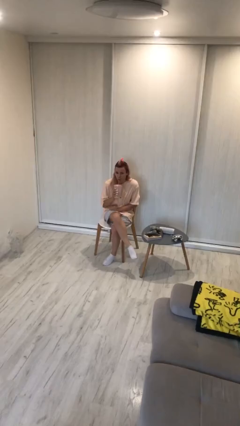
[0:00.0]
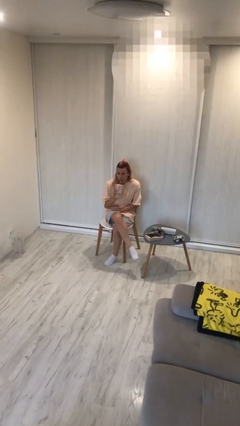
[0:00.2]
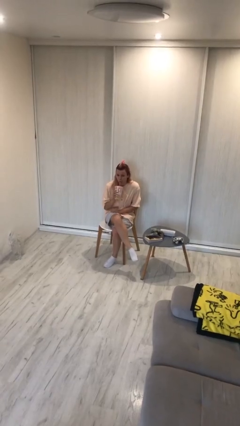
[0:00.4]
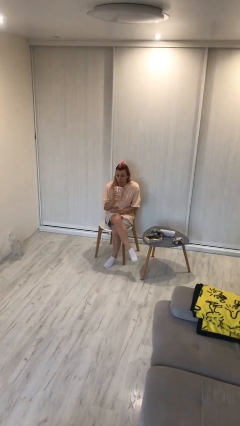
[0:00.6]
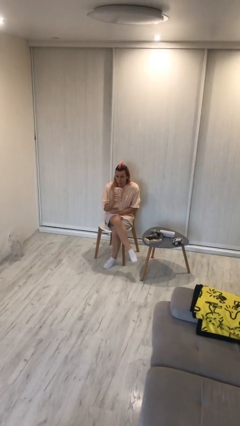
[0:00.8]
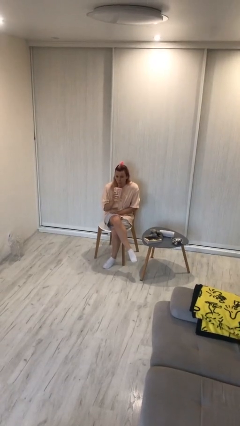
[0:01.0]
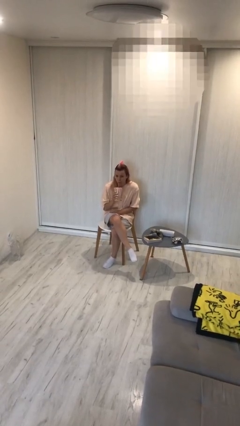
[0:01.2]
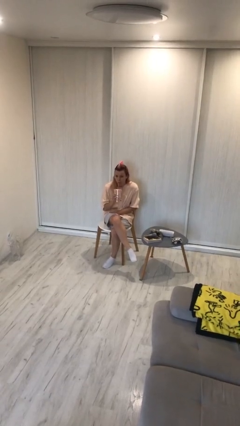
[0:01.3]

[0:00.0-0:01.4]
person drinks from straw

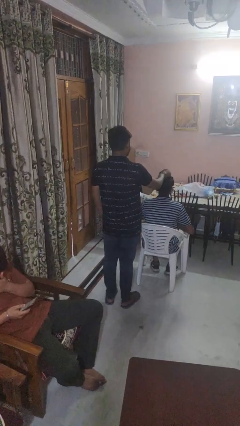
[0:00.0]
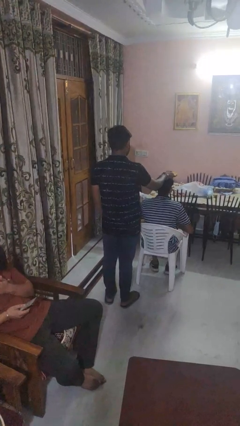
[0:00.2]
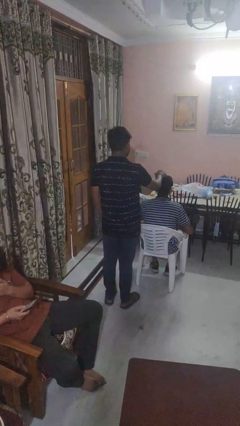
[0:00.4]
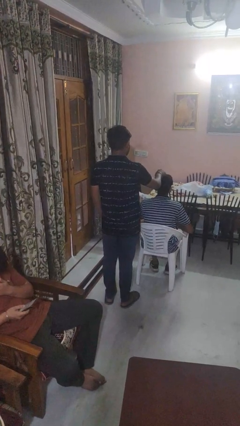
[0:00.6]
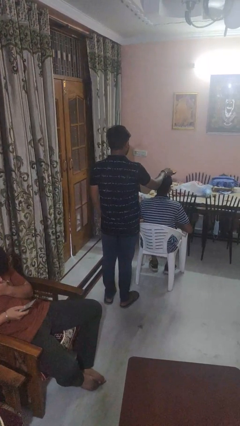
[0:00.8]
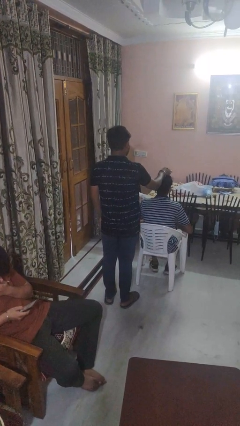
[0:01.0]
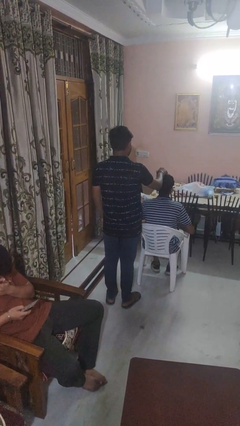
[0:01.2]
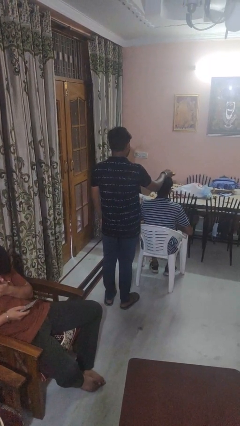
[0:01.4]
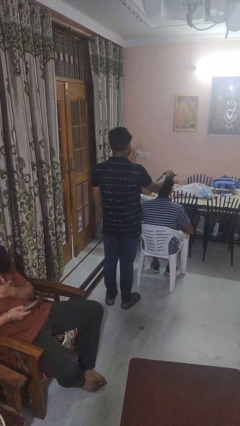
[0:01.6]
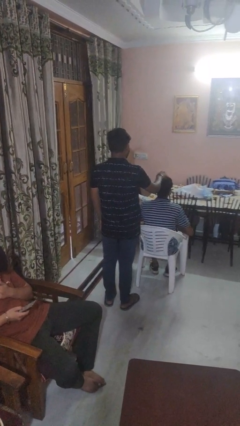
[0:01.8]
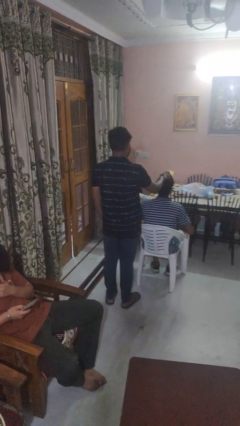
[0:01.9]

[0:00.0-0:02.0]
person brushes hair of person

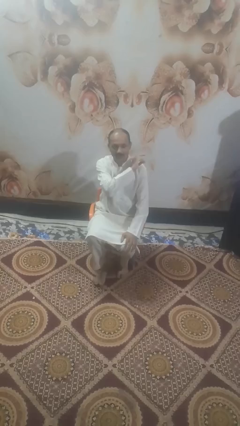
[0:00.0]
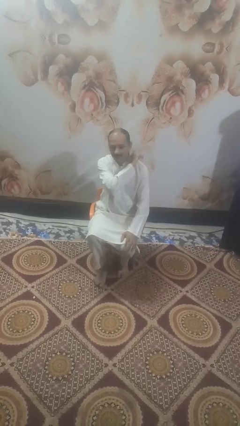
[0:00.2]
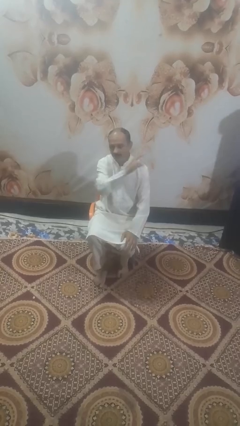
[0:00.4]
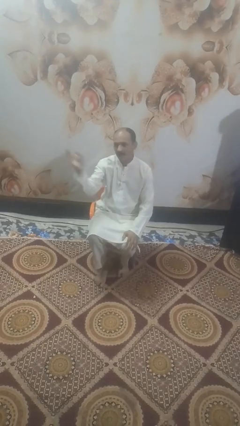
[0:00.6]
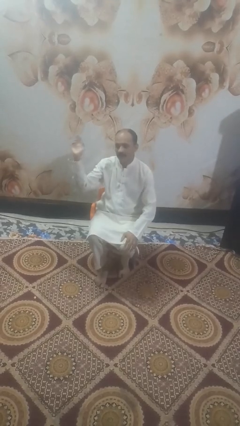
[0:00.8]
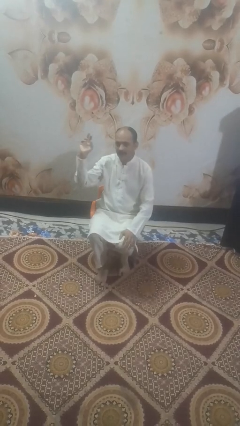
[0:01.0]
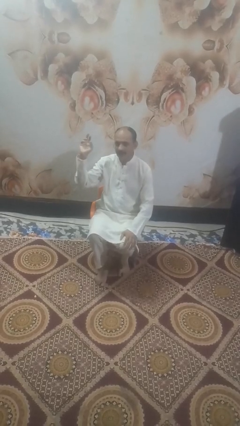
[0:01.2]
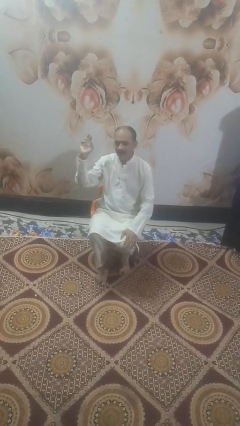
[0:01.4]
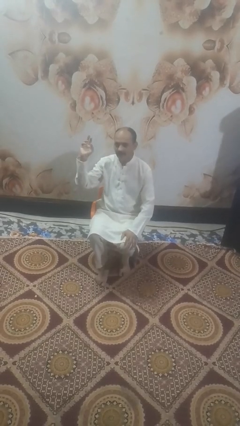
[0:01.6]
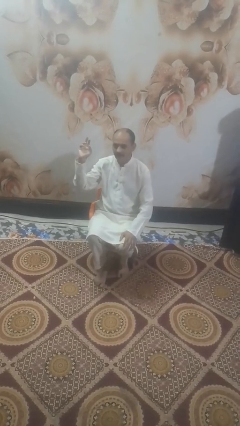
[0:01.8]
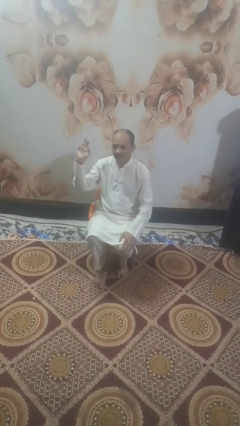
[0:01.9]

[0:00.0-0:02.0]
person gestures swipe right

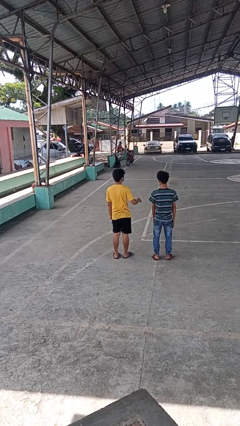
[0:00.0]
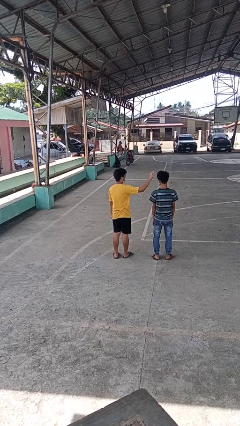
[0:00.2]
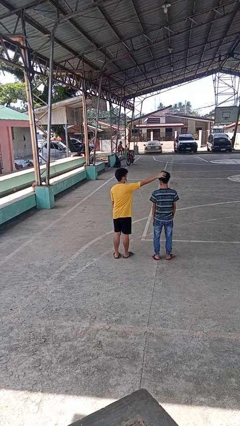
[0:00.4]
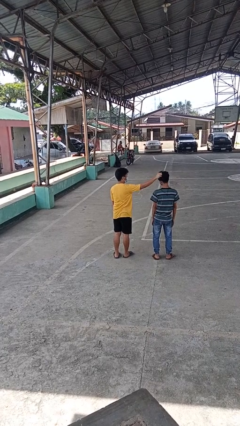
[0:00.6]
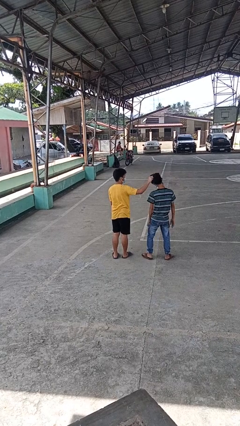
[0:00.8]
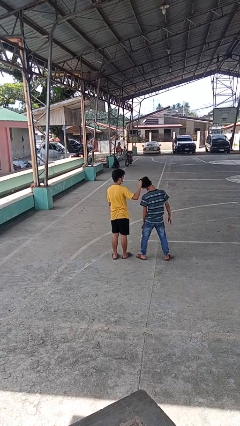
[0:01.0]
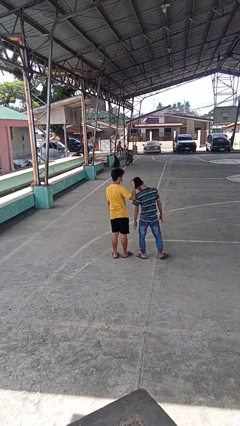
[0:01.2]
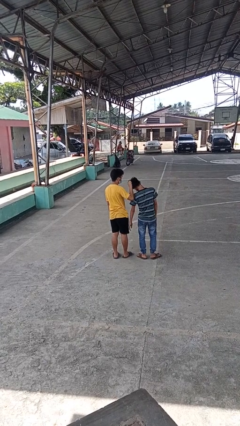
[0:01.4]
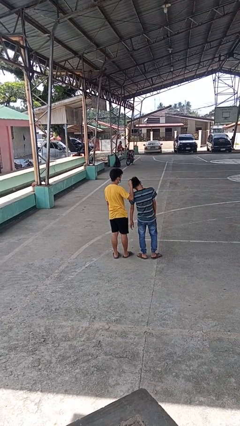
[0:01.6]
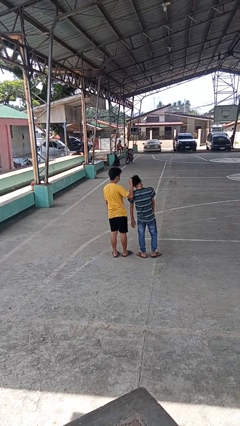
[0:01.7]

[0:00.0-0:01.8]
person grabs person by hair

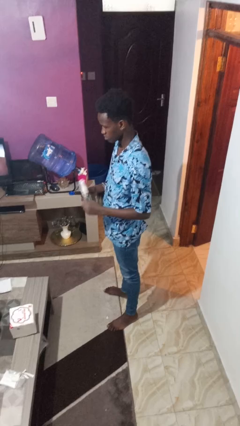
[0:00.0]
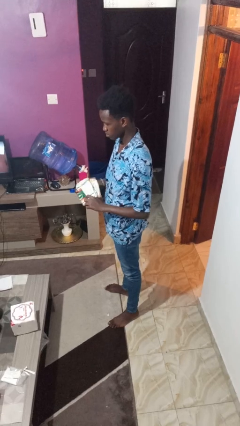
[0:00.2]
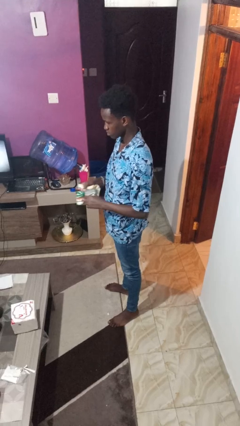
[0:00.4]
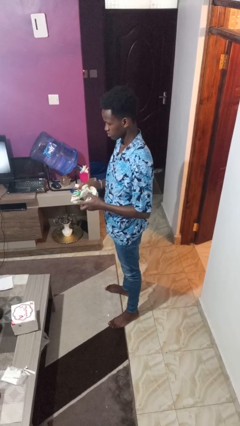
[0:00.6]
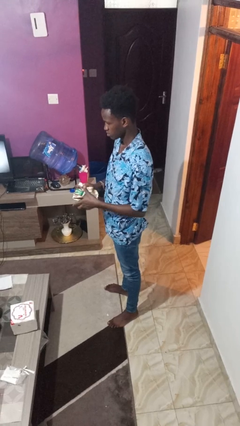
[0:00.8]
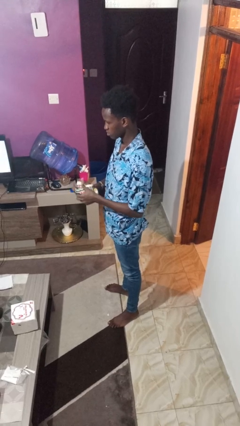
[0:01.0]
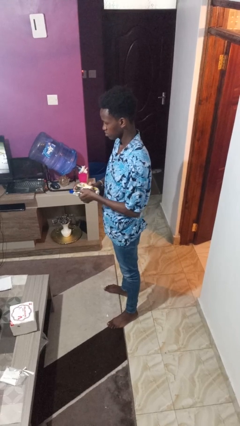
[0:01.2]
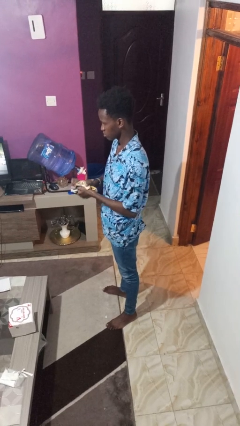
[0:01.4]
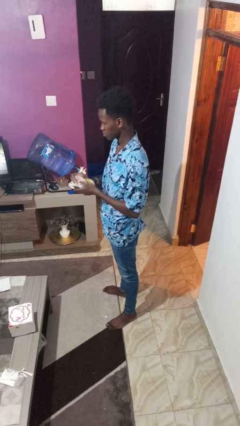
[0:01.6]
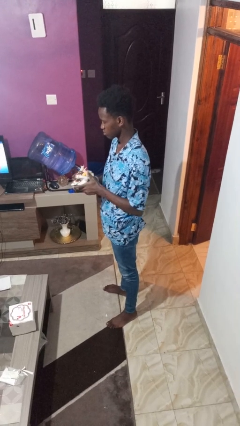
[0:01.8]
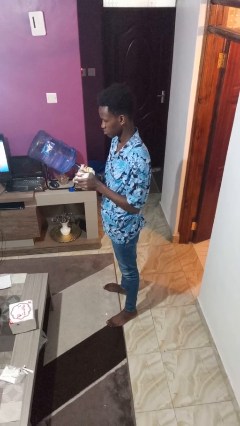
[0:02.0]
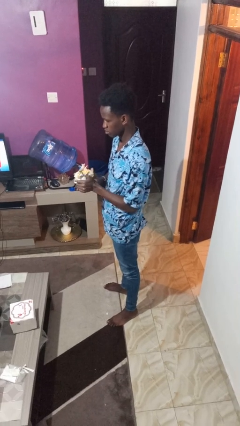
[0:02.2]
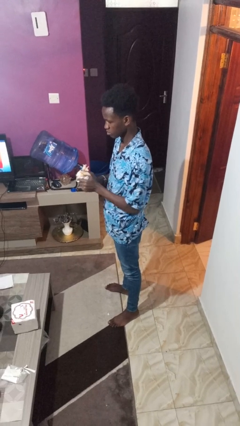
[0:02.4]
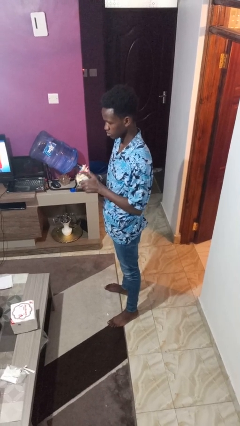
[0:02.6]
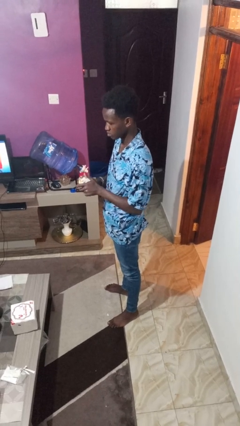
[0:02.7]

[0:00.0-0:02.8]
person crumples paper

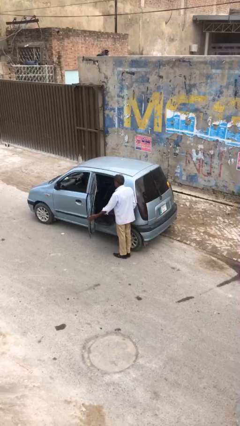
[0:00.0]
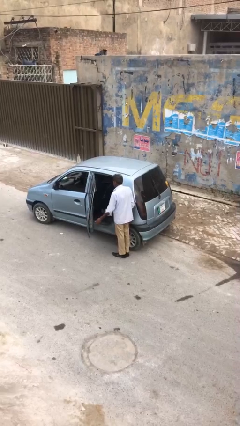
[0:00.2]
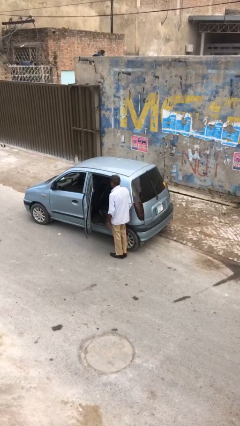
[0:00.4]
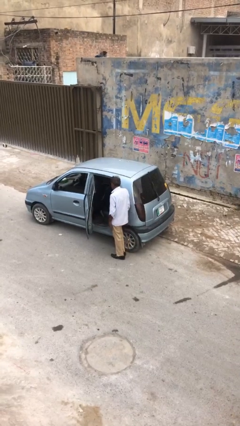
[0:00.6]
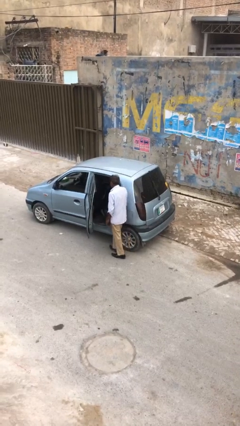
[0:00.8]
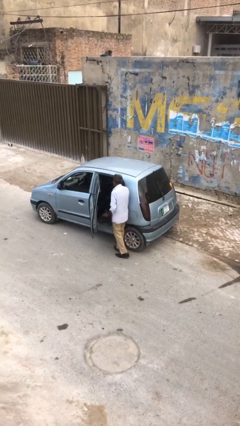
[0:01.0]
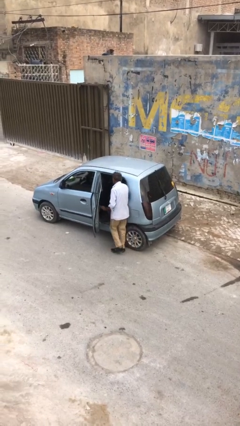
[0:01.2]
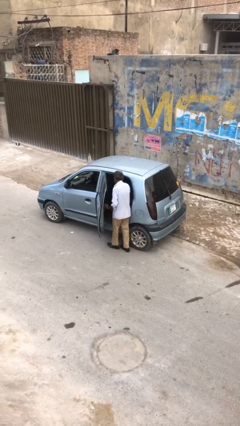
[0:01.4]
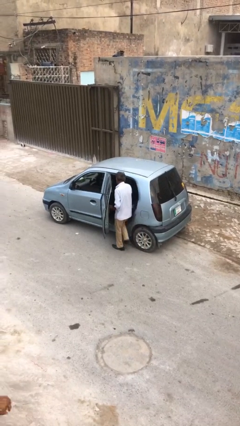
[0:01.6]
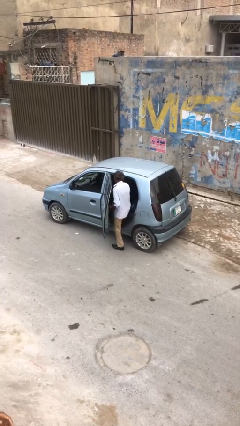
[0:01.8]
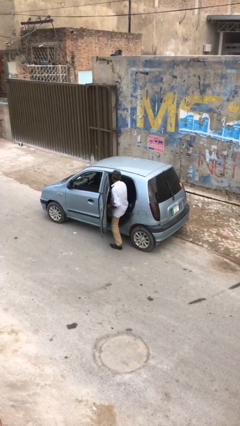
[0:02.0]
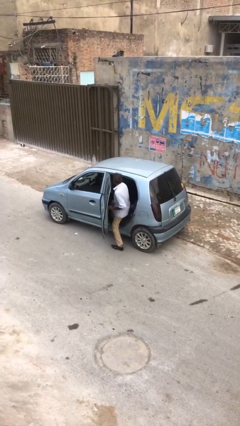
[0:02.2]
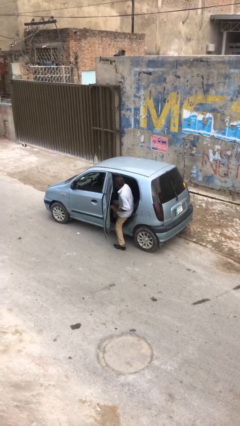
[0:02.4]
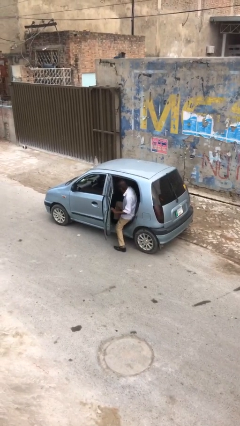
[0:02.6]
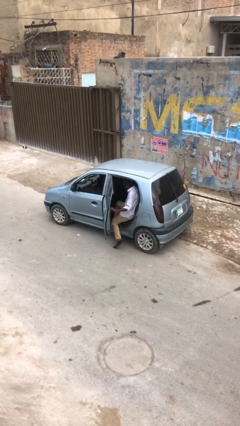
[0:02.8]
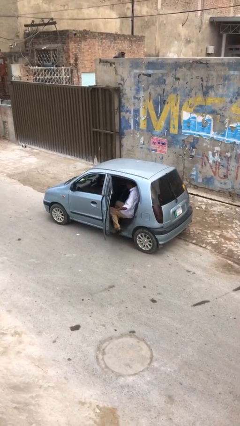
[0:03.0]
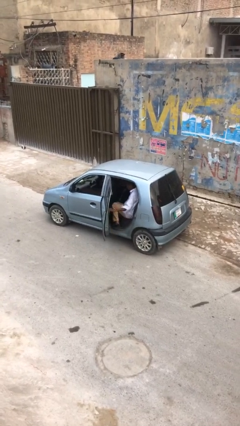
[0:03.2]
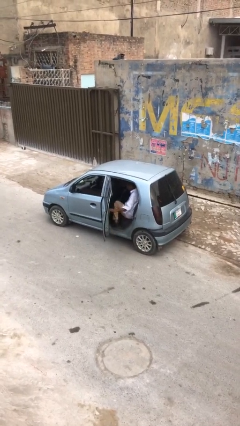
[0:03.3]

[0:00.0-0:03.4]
person enters car

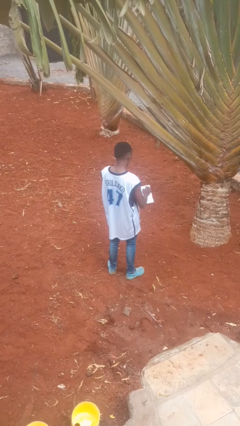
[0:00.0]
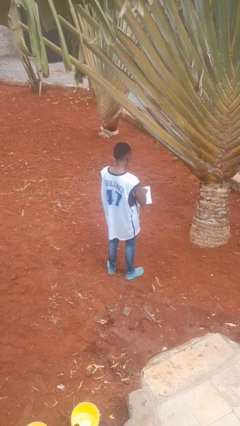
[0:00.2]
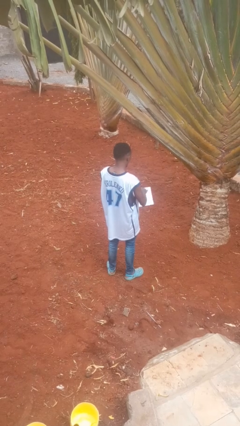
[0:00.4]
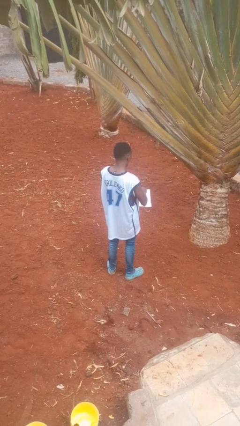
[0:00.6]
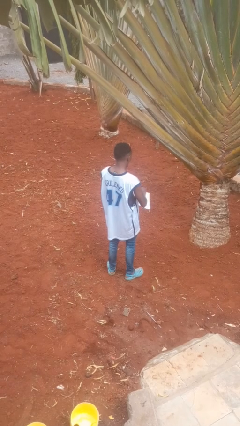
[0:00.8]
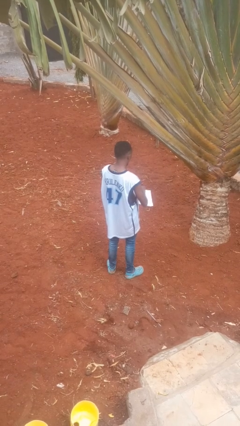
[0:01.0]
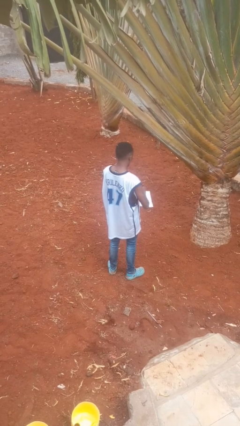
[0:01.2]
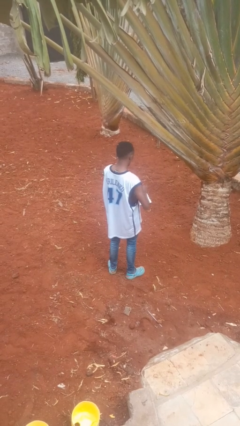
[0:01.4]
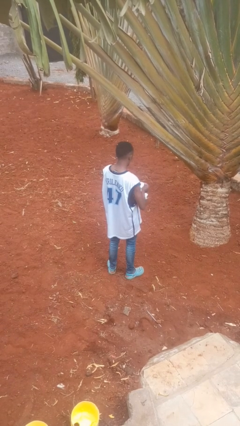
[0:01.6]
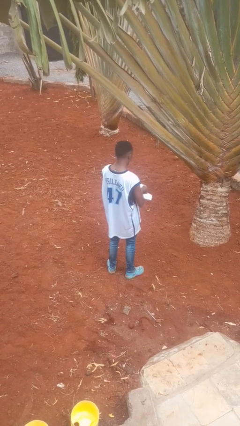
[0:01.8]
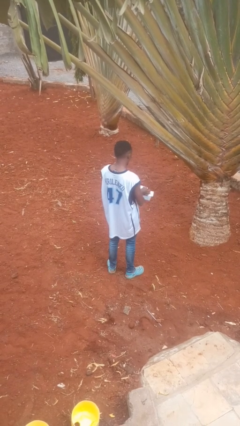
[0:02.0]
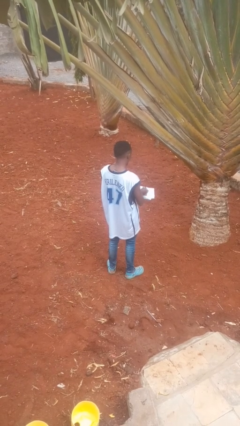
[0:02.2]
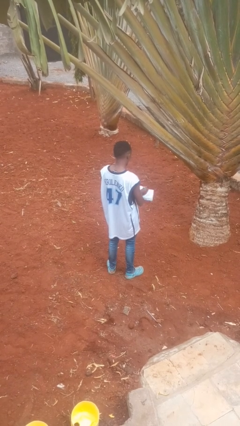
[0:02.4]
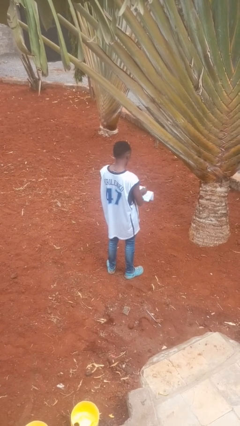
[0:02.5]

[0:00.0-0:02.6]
person tears paper

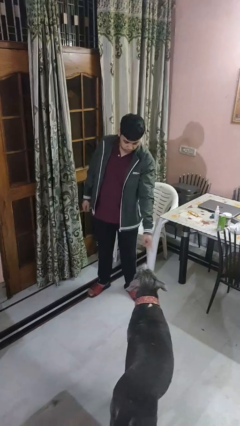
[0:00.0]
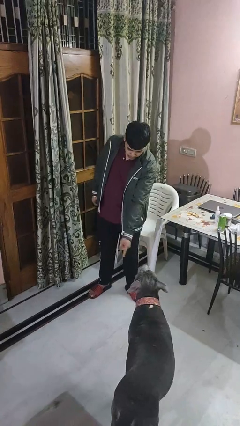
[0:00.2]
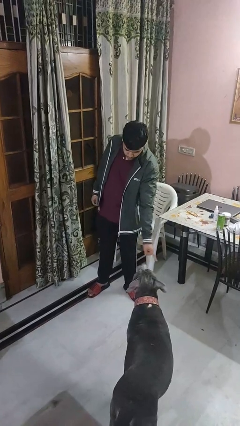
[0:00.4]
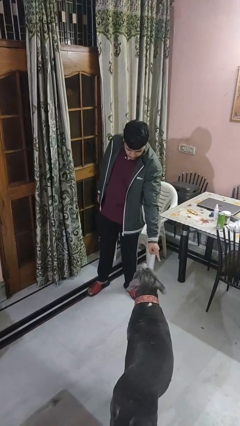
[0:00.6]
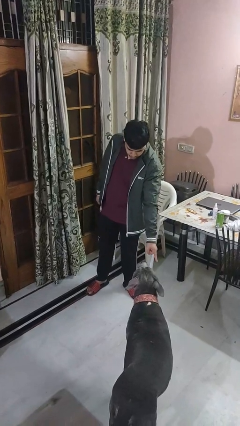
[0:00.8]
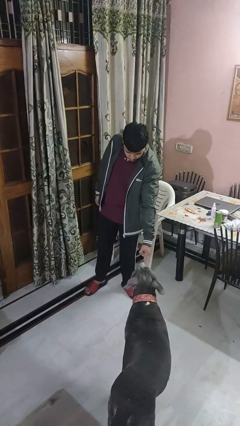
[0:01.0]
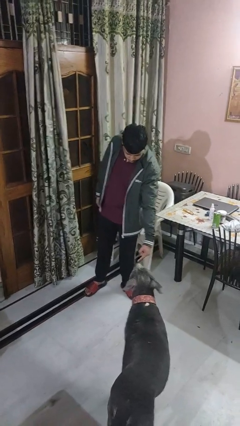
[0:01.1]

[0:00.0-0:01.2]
person points to dog
